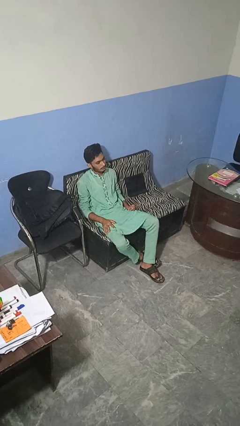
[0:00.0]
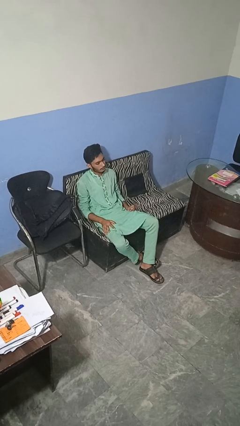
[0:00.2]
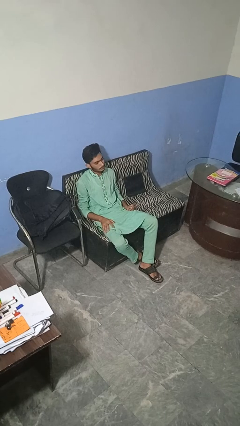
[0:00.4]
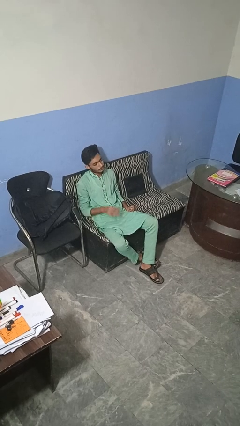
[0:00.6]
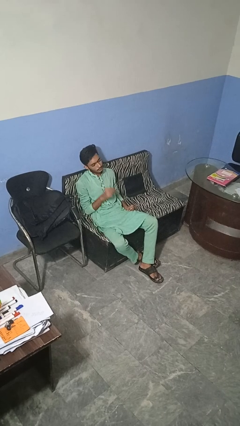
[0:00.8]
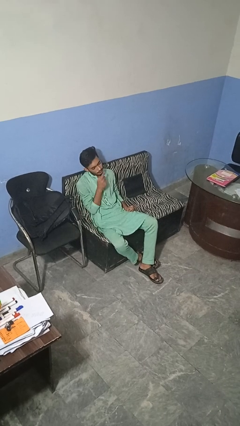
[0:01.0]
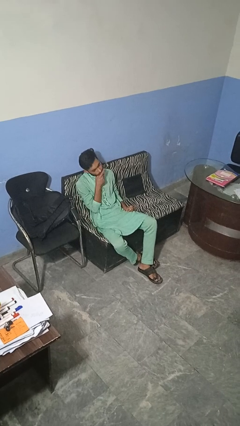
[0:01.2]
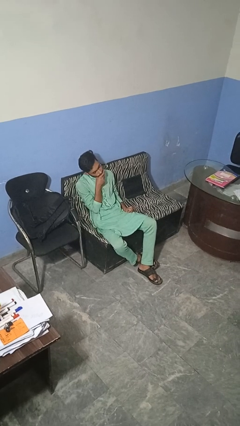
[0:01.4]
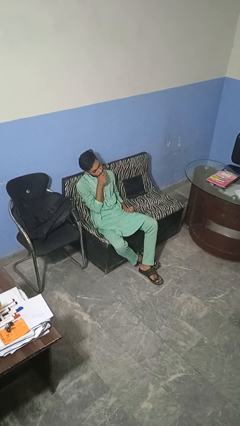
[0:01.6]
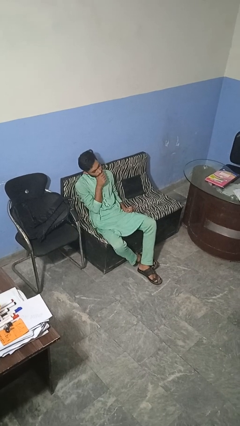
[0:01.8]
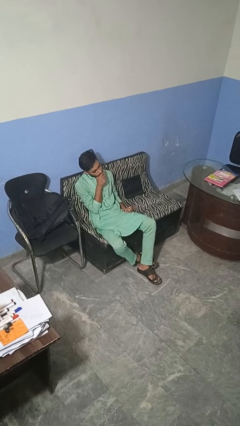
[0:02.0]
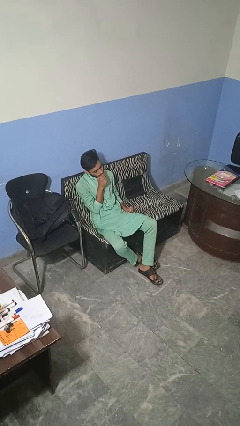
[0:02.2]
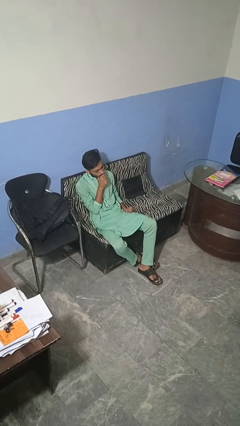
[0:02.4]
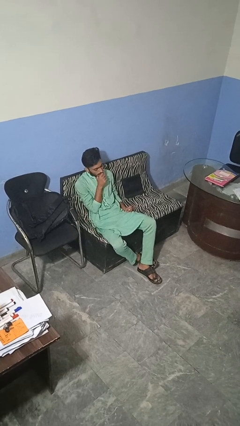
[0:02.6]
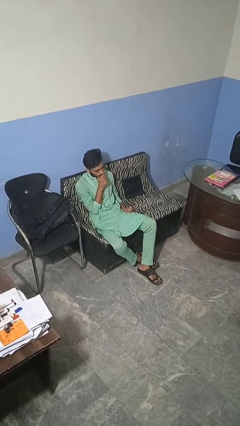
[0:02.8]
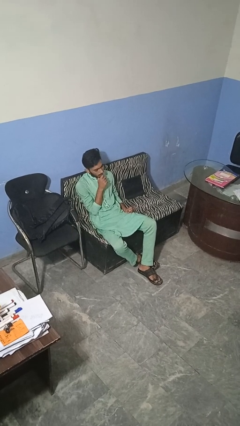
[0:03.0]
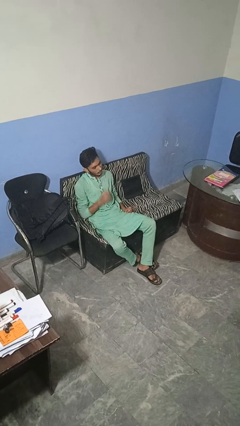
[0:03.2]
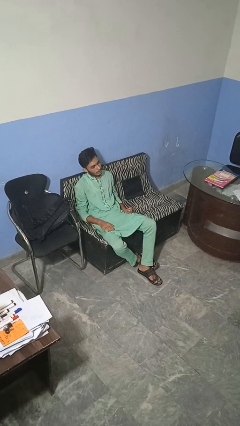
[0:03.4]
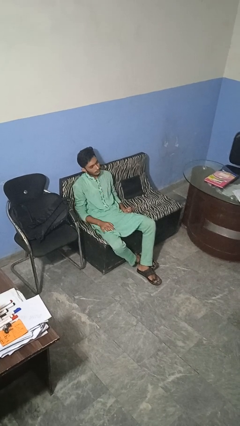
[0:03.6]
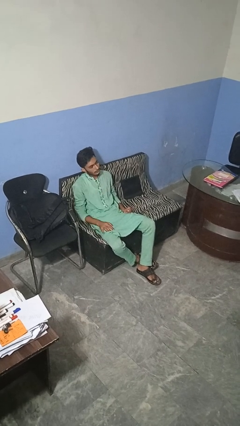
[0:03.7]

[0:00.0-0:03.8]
person strokes chin

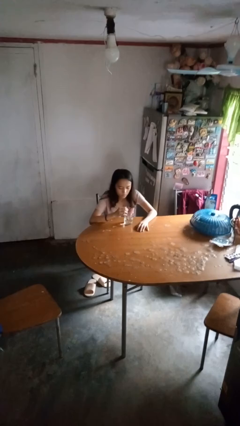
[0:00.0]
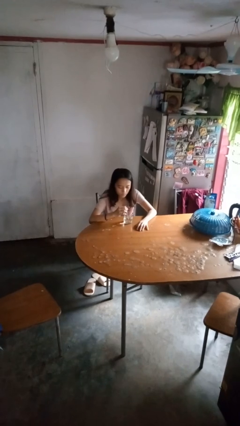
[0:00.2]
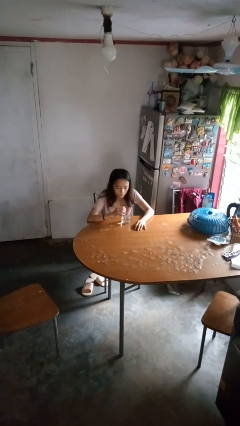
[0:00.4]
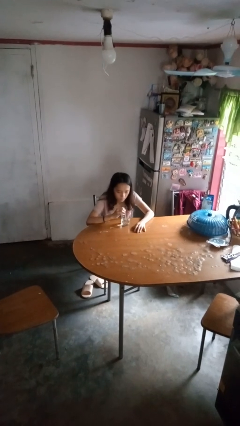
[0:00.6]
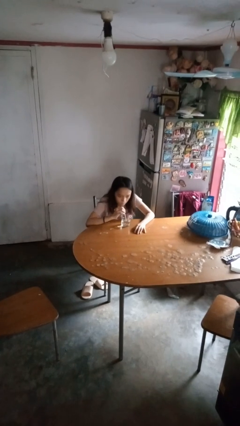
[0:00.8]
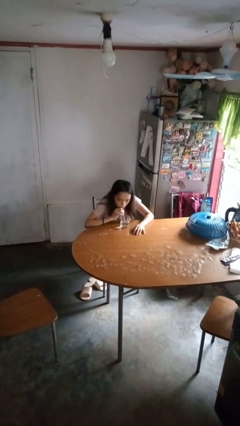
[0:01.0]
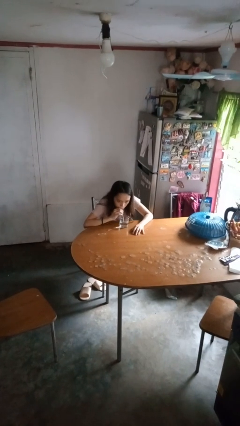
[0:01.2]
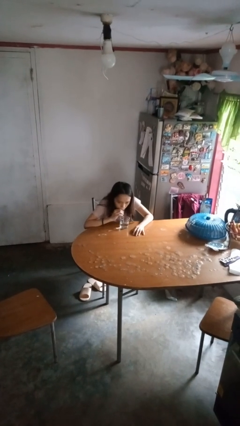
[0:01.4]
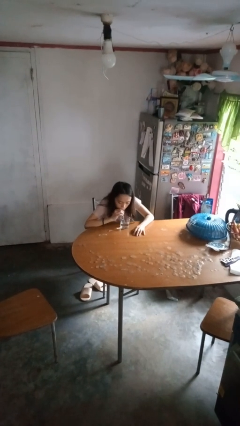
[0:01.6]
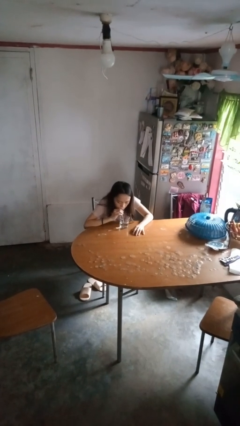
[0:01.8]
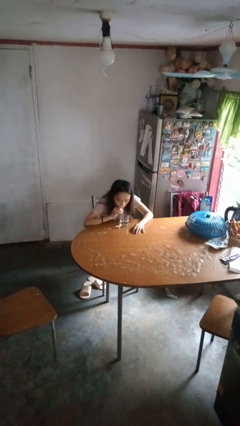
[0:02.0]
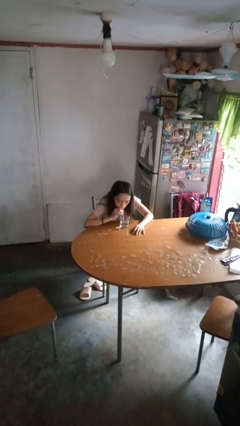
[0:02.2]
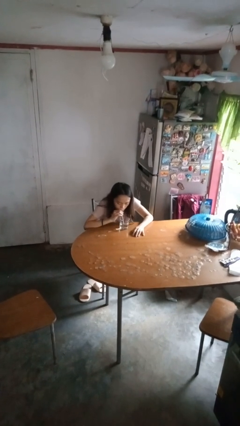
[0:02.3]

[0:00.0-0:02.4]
person drinks from straw

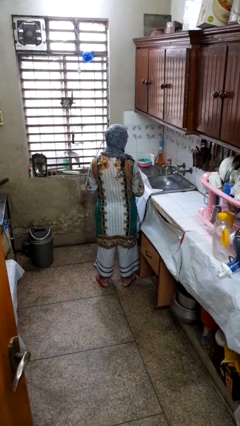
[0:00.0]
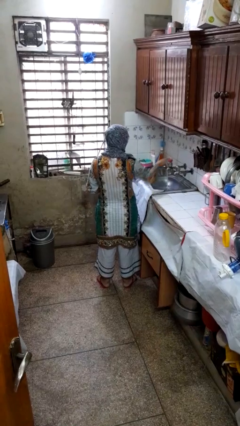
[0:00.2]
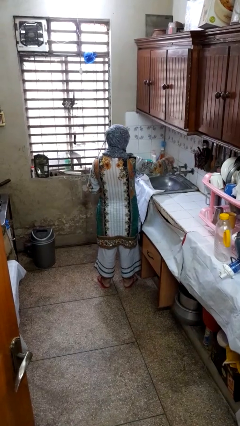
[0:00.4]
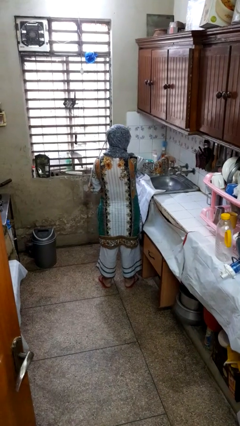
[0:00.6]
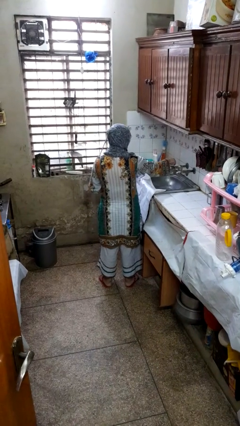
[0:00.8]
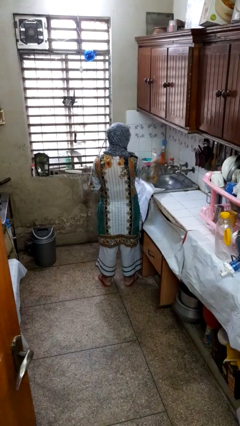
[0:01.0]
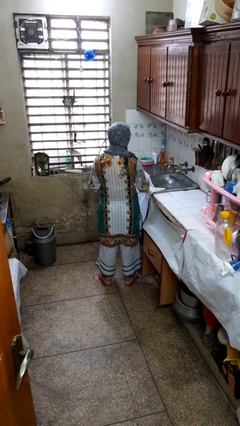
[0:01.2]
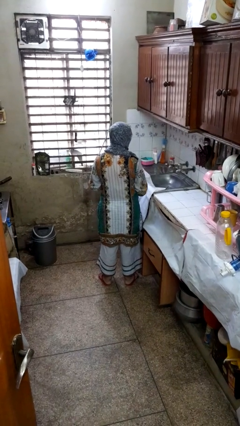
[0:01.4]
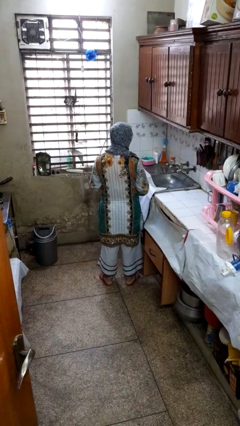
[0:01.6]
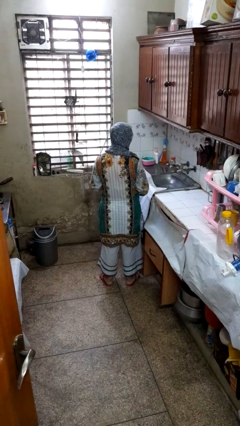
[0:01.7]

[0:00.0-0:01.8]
person turns off faucet

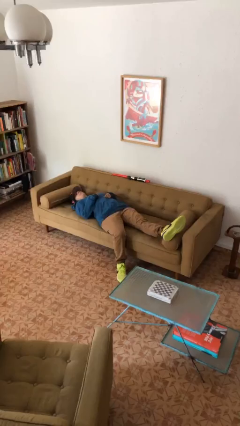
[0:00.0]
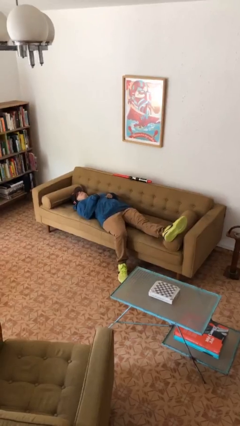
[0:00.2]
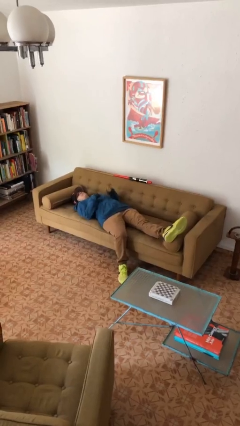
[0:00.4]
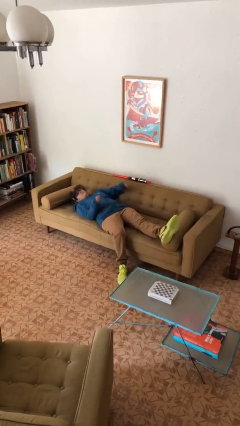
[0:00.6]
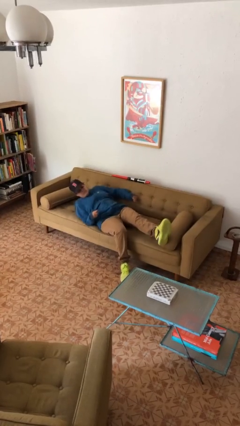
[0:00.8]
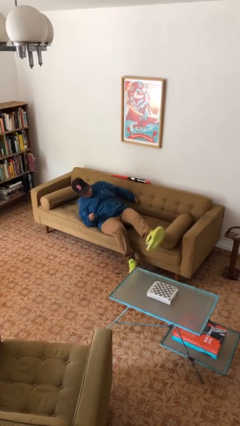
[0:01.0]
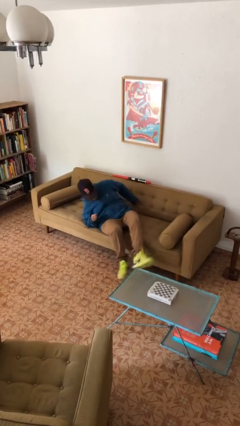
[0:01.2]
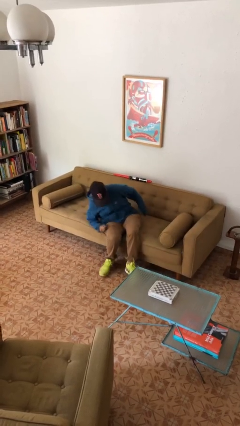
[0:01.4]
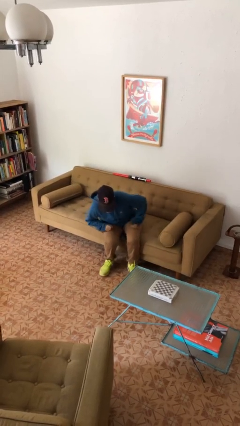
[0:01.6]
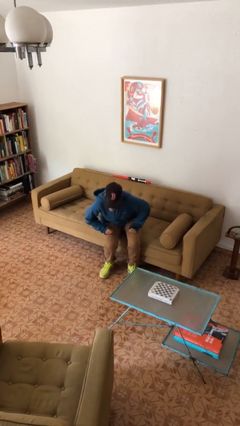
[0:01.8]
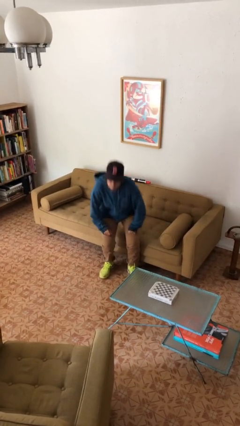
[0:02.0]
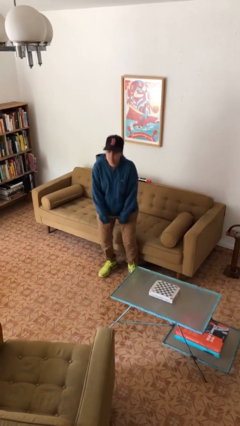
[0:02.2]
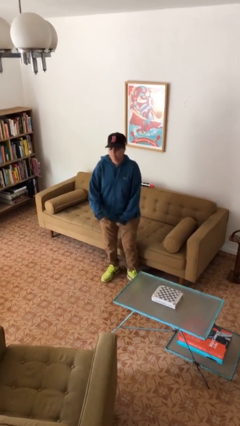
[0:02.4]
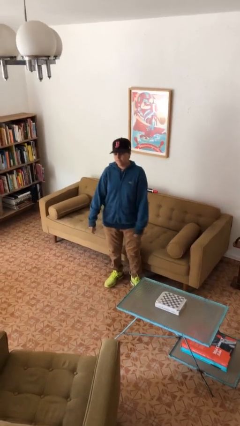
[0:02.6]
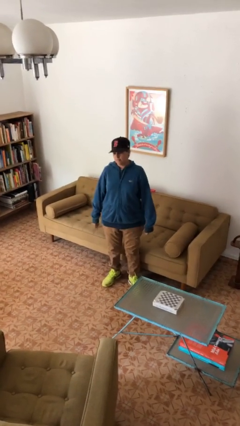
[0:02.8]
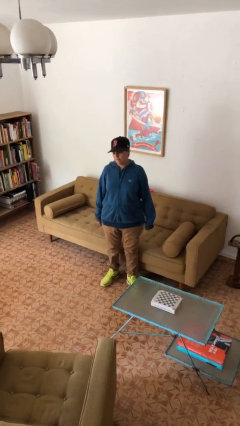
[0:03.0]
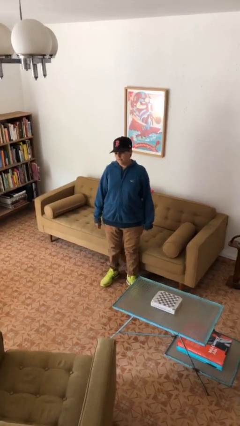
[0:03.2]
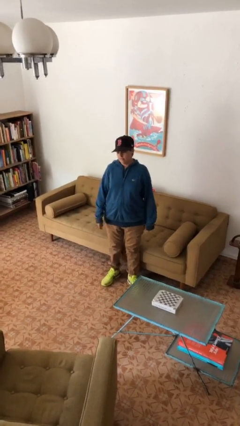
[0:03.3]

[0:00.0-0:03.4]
person stands up

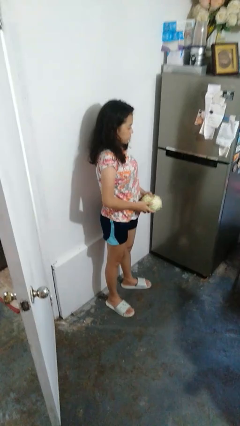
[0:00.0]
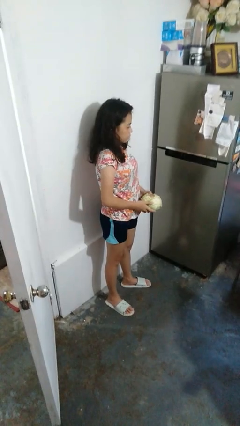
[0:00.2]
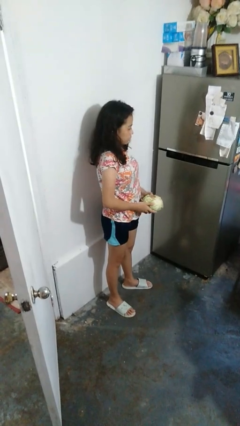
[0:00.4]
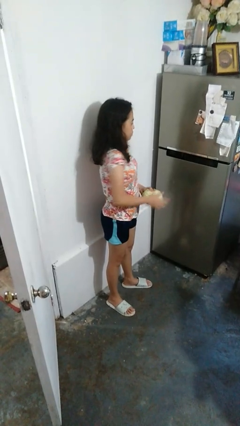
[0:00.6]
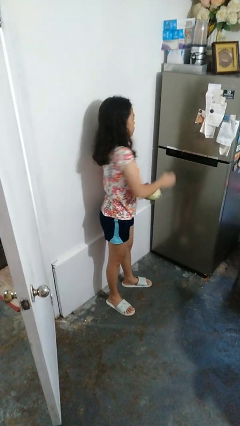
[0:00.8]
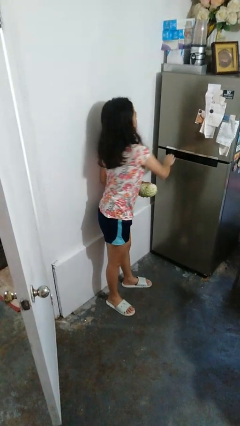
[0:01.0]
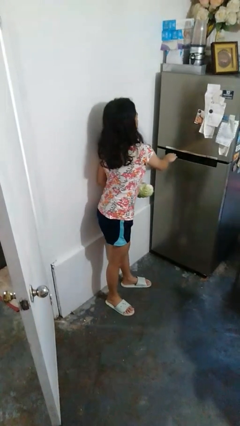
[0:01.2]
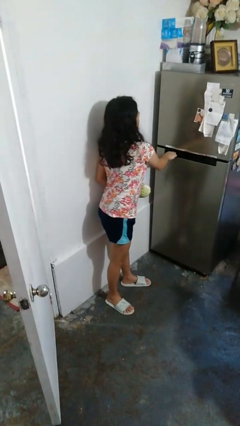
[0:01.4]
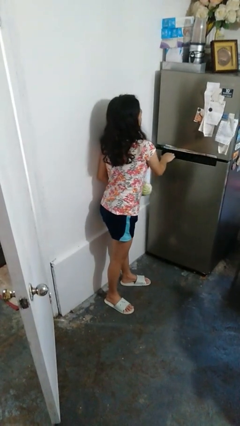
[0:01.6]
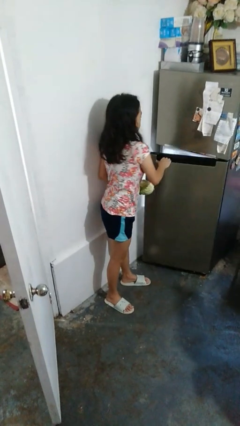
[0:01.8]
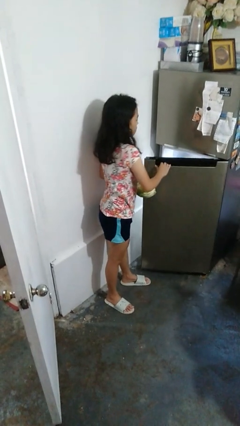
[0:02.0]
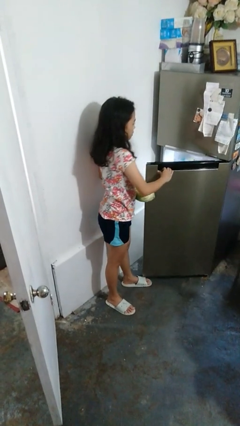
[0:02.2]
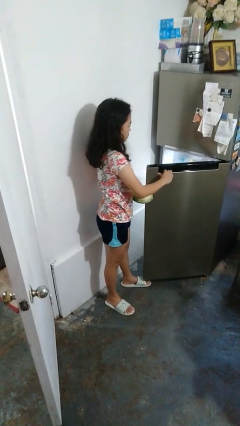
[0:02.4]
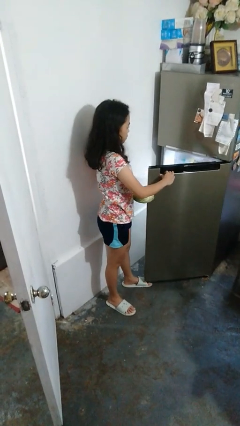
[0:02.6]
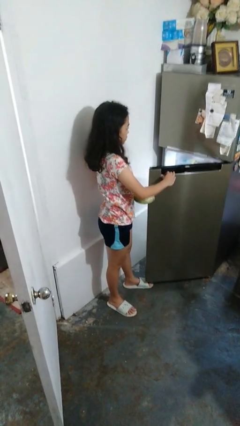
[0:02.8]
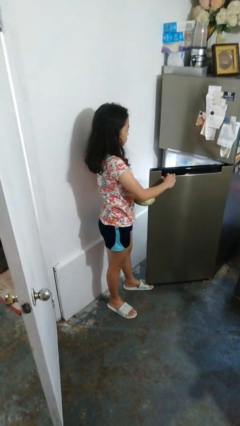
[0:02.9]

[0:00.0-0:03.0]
person opens refrigerator

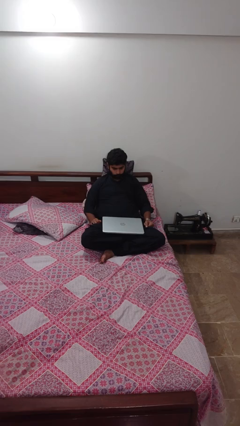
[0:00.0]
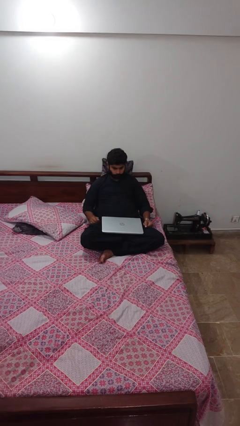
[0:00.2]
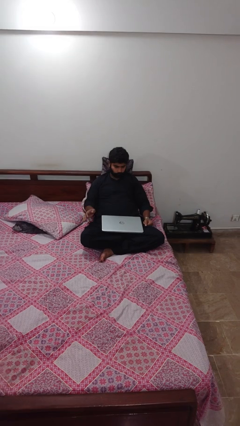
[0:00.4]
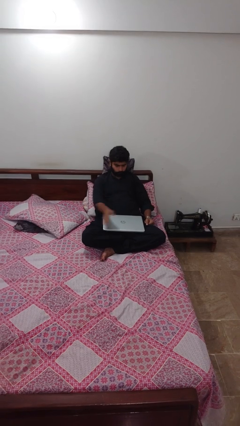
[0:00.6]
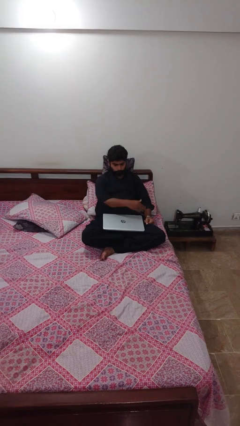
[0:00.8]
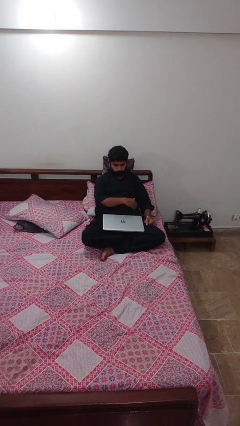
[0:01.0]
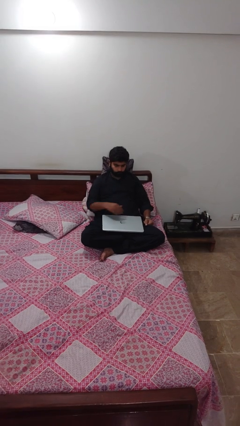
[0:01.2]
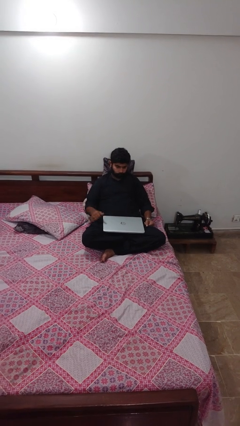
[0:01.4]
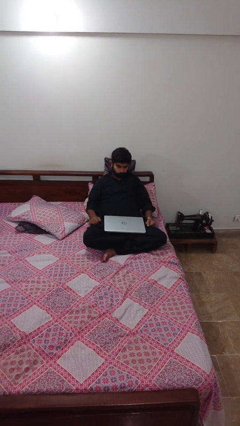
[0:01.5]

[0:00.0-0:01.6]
person waves hand over object

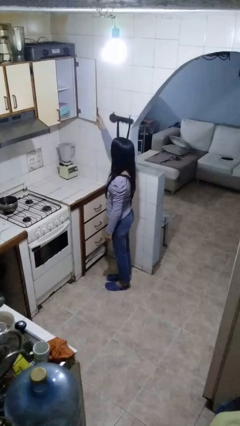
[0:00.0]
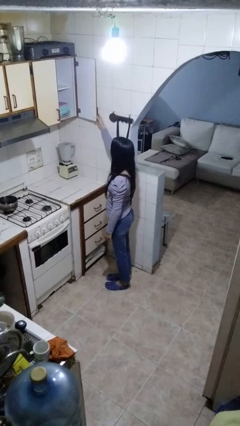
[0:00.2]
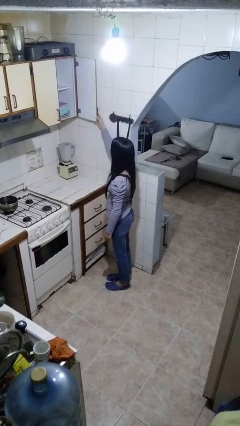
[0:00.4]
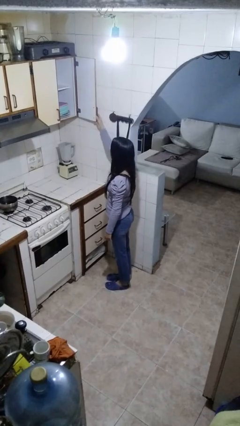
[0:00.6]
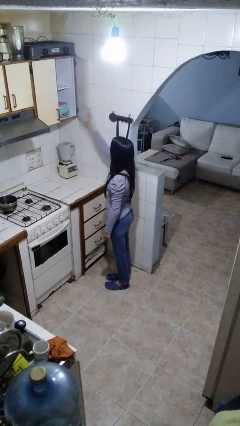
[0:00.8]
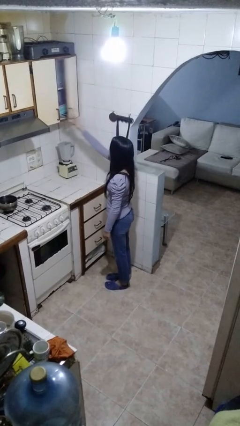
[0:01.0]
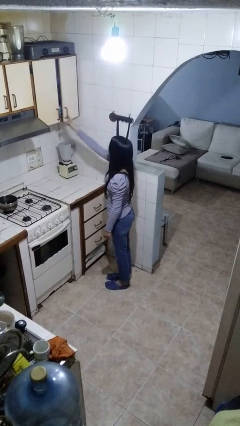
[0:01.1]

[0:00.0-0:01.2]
person closes cabinet
